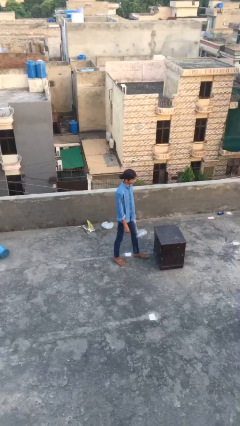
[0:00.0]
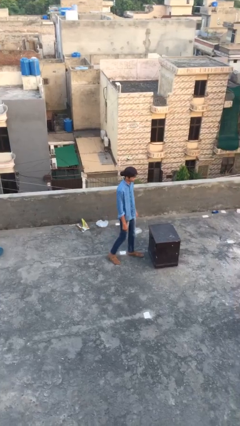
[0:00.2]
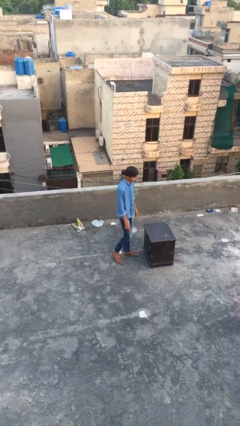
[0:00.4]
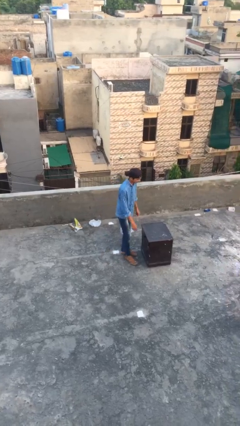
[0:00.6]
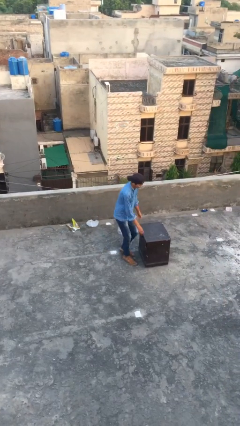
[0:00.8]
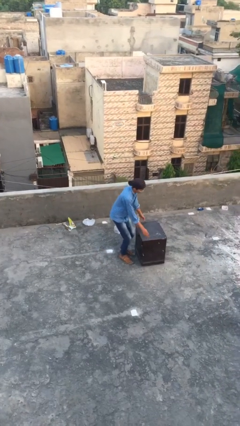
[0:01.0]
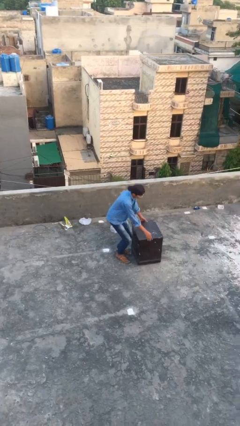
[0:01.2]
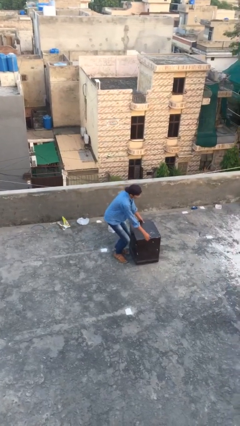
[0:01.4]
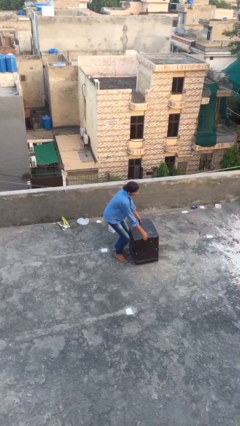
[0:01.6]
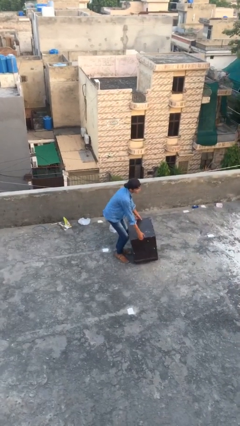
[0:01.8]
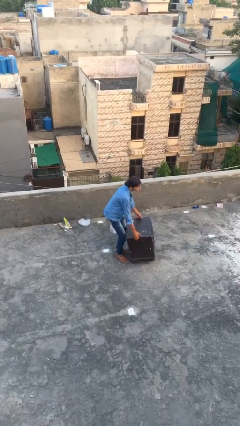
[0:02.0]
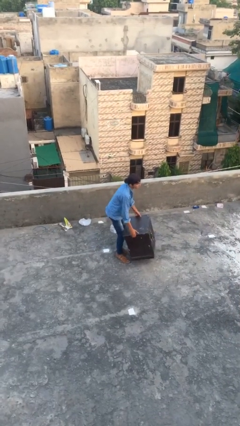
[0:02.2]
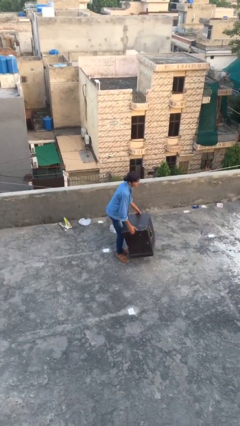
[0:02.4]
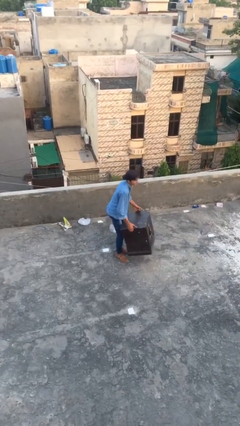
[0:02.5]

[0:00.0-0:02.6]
person picks up object from floor

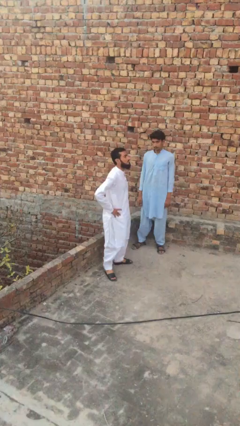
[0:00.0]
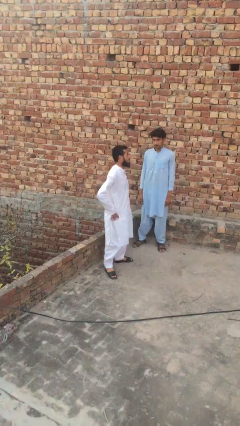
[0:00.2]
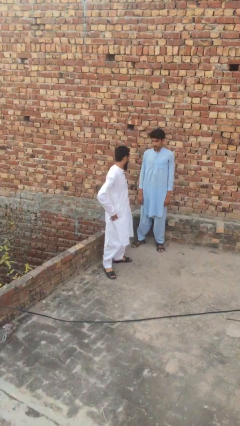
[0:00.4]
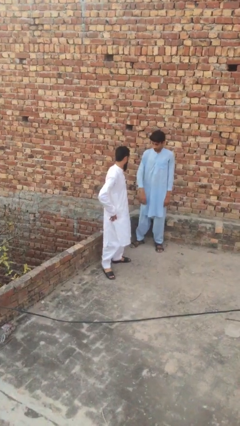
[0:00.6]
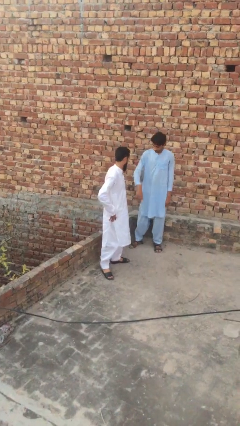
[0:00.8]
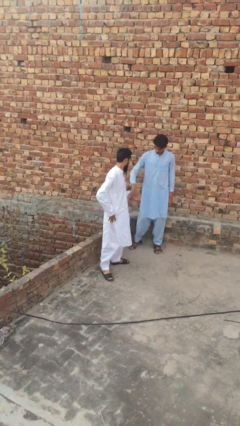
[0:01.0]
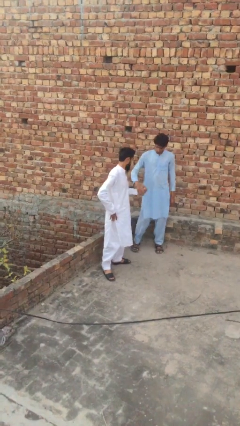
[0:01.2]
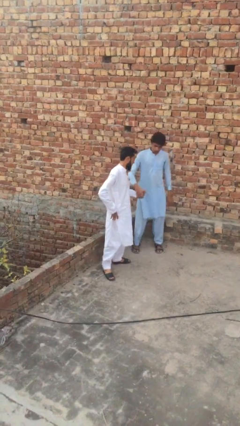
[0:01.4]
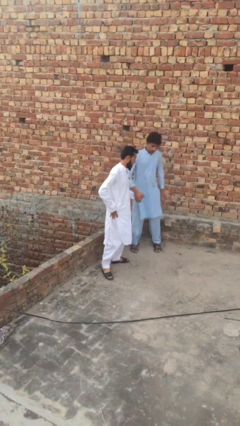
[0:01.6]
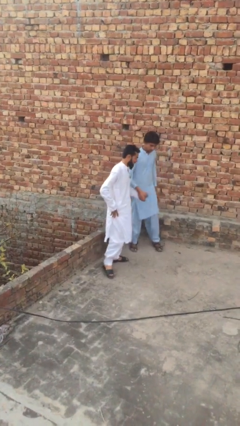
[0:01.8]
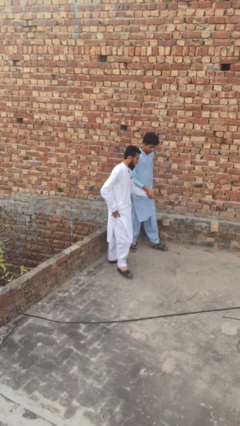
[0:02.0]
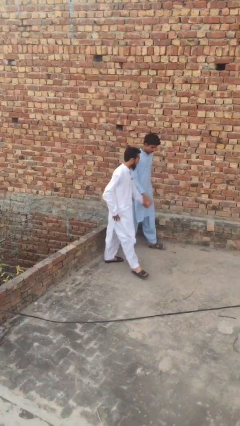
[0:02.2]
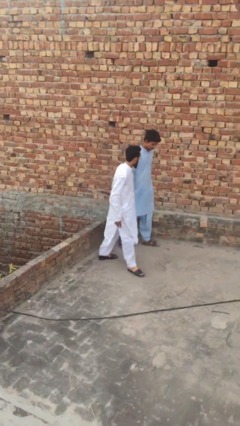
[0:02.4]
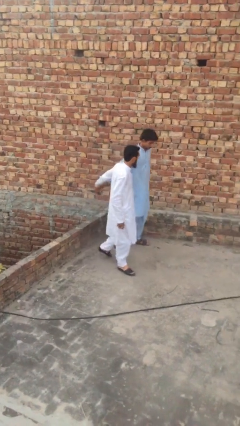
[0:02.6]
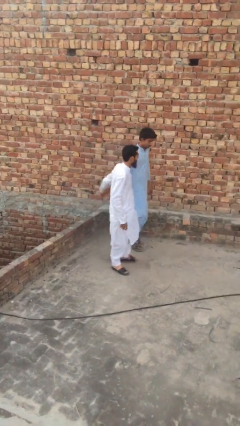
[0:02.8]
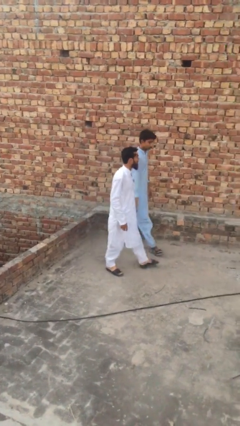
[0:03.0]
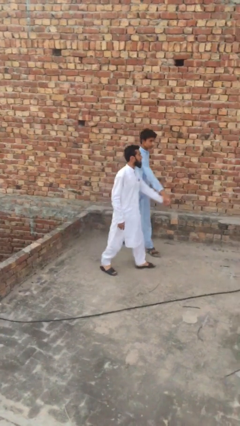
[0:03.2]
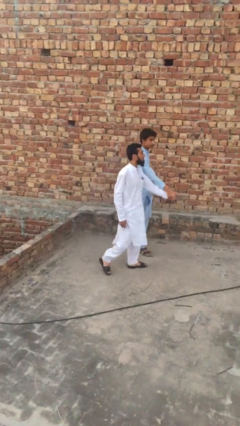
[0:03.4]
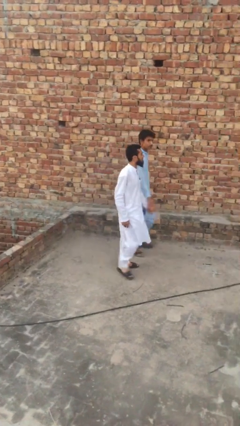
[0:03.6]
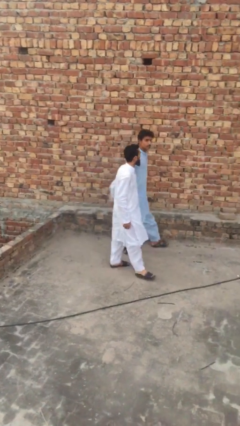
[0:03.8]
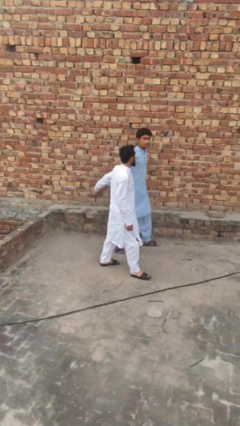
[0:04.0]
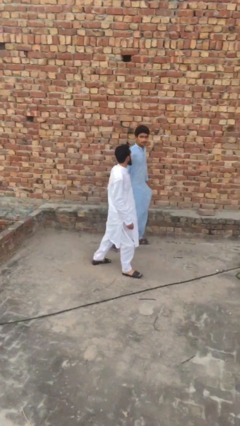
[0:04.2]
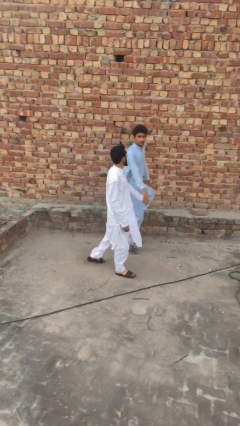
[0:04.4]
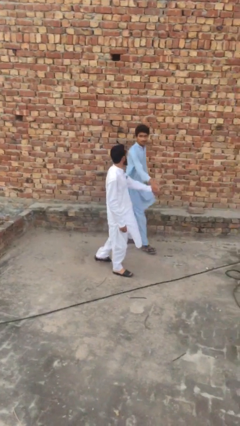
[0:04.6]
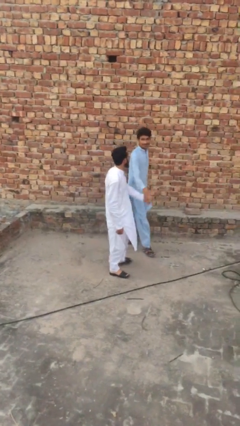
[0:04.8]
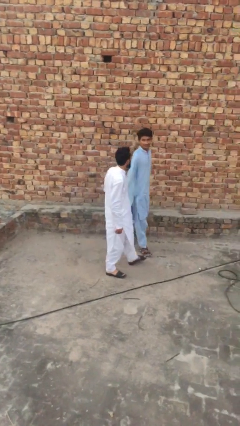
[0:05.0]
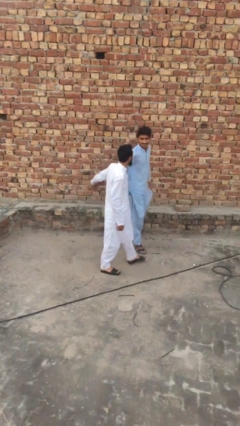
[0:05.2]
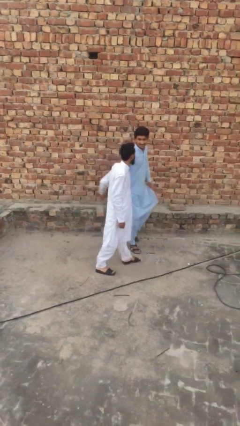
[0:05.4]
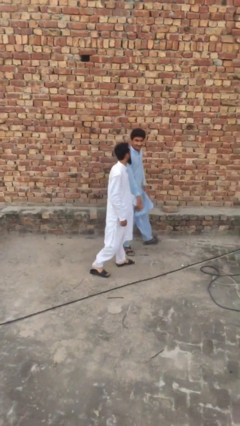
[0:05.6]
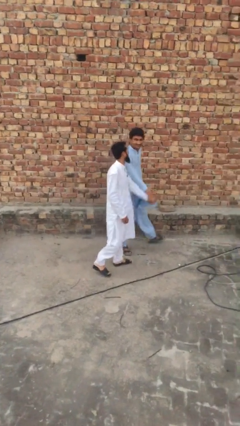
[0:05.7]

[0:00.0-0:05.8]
person holds hand

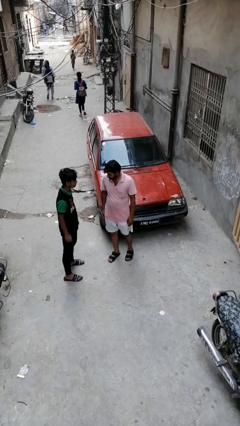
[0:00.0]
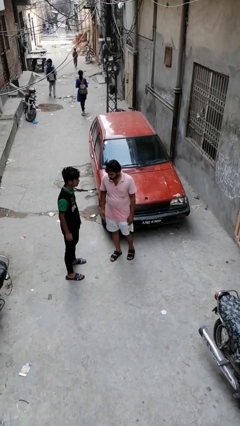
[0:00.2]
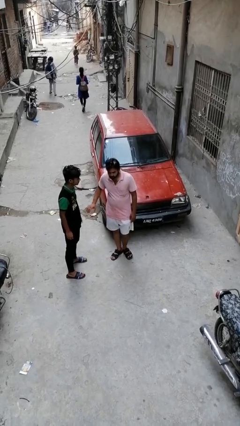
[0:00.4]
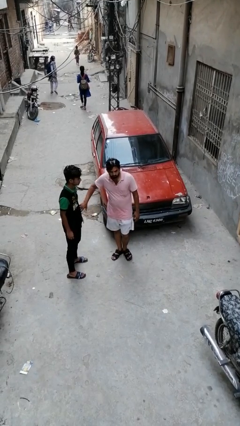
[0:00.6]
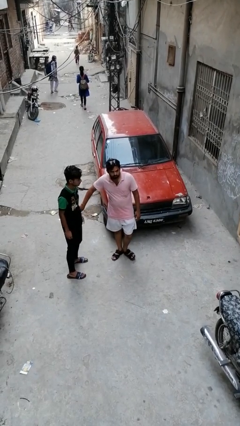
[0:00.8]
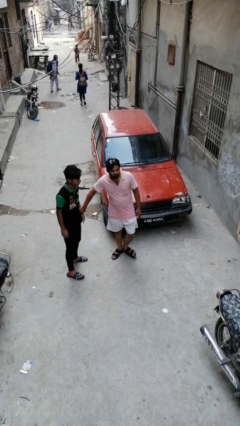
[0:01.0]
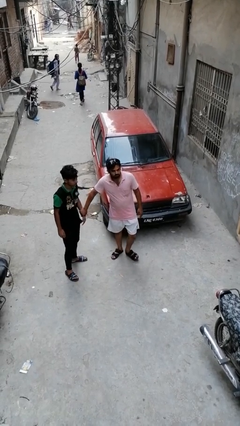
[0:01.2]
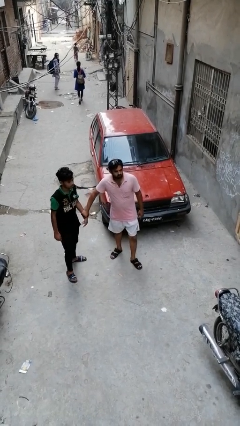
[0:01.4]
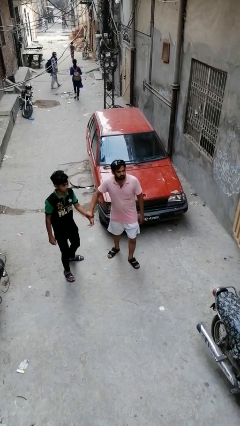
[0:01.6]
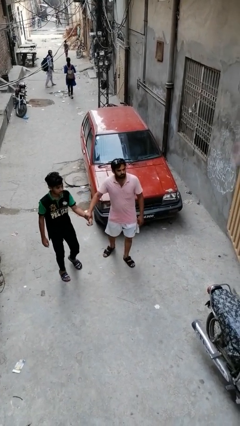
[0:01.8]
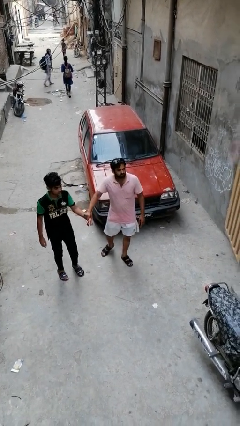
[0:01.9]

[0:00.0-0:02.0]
person grabs person by forearm

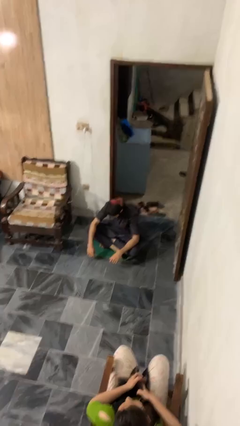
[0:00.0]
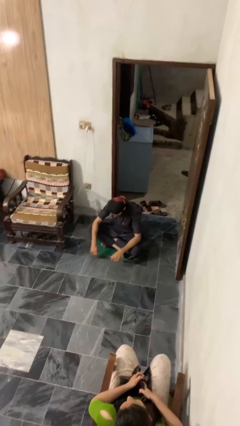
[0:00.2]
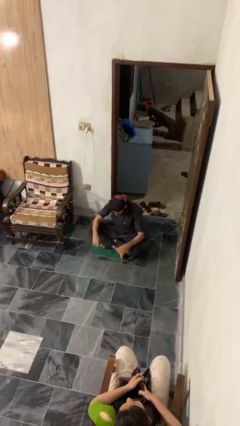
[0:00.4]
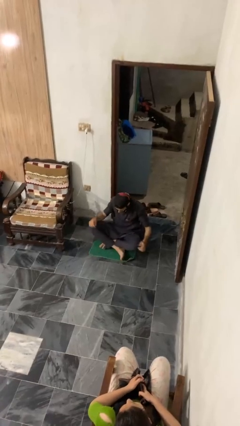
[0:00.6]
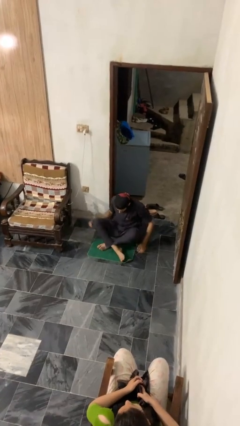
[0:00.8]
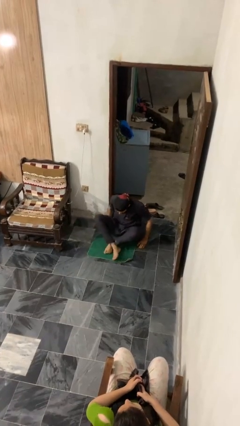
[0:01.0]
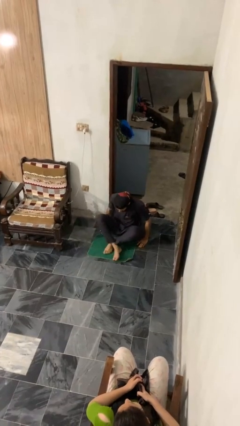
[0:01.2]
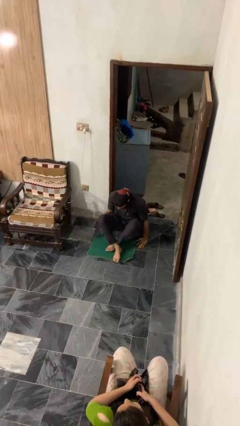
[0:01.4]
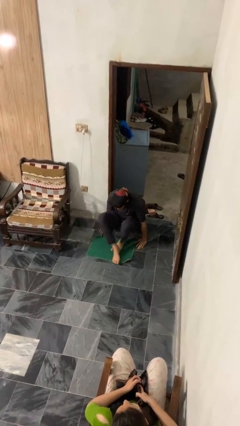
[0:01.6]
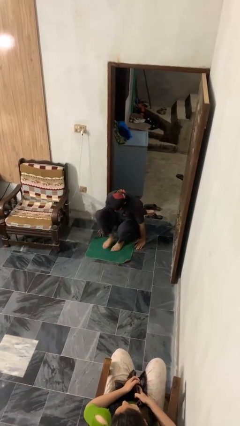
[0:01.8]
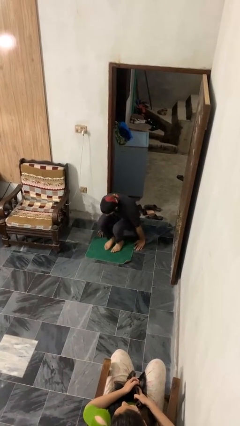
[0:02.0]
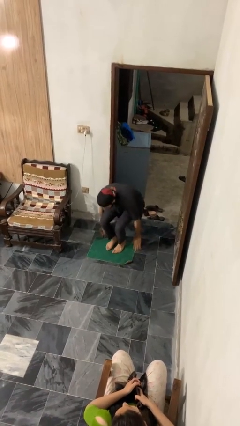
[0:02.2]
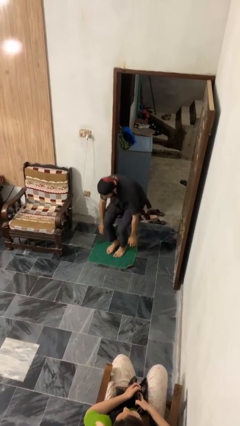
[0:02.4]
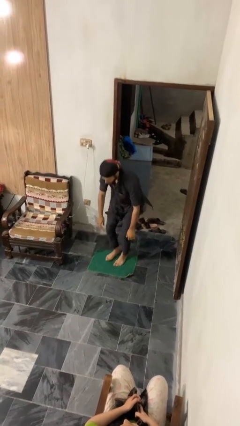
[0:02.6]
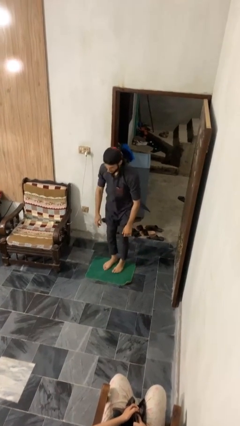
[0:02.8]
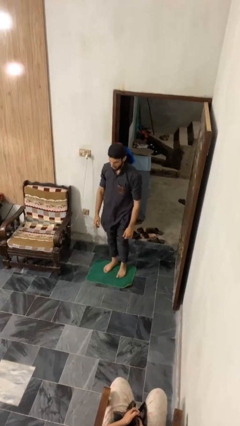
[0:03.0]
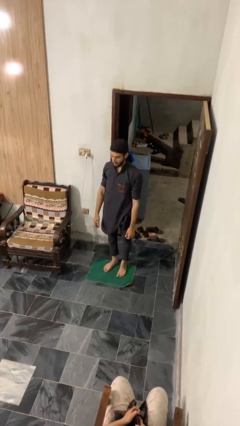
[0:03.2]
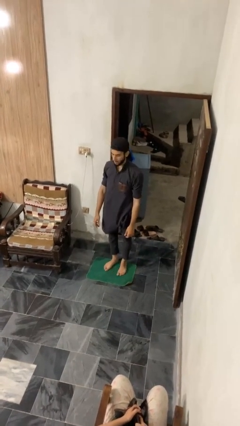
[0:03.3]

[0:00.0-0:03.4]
person stands up from floor

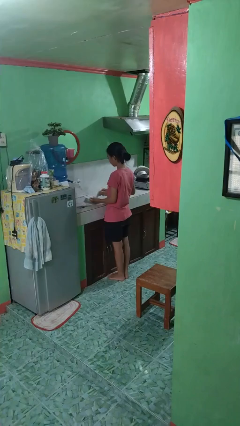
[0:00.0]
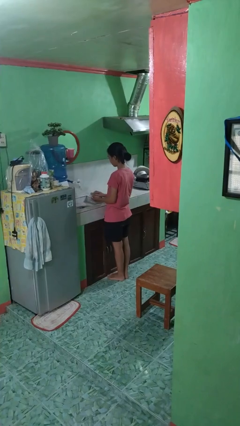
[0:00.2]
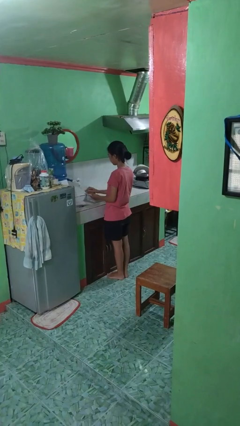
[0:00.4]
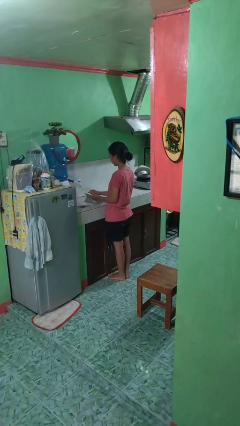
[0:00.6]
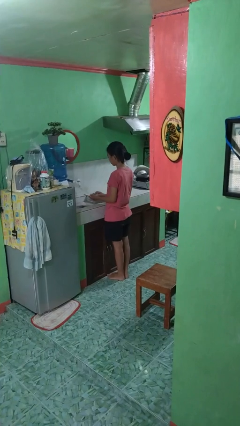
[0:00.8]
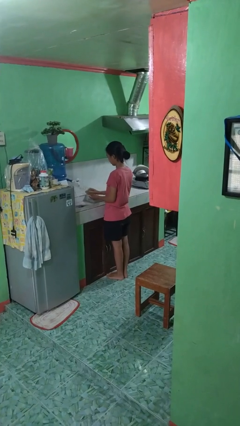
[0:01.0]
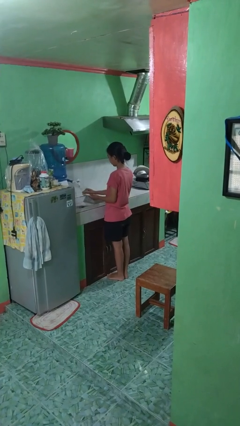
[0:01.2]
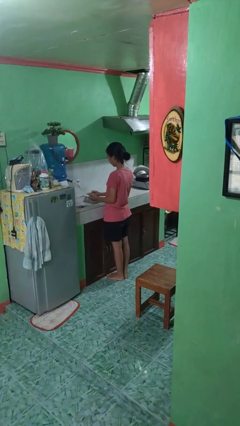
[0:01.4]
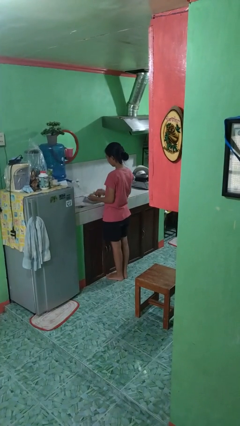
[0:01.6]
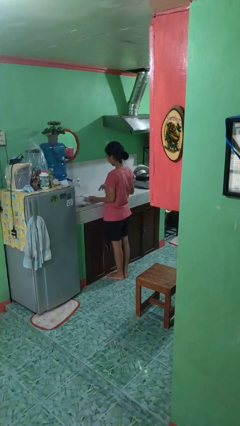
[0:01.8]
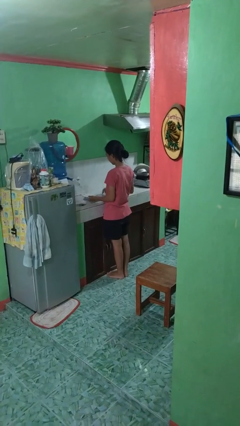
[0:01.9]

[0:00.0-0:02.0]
person dries dish

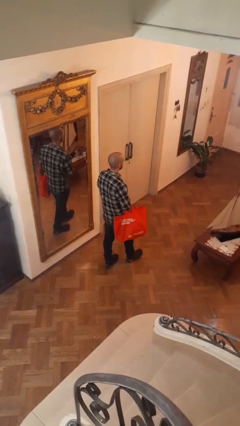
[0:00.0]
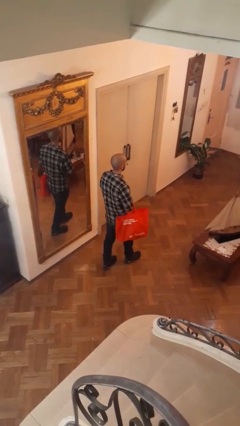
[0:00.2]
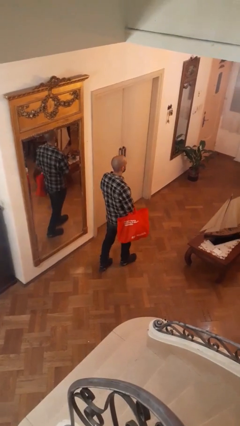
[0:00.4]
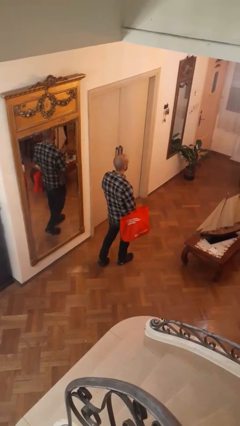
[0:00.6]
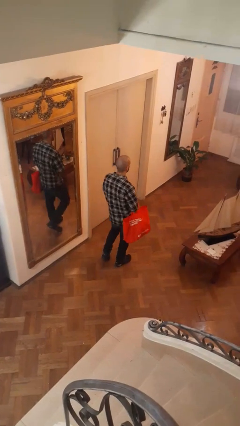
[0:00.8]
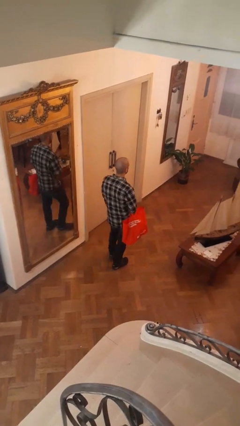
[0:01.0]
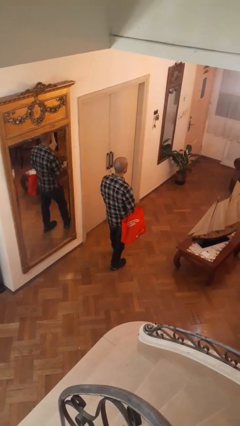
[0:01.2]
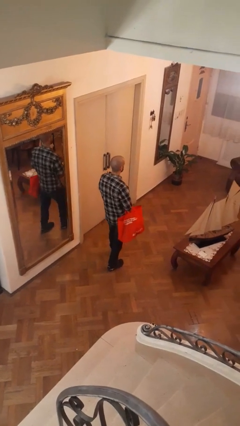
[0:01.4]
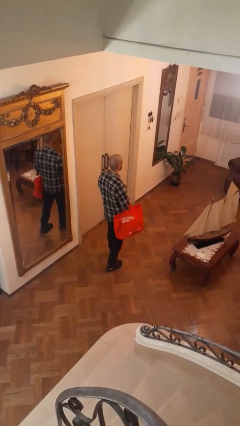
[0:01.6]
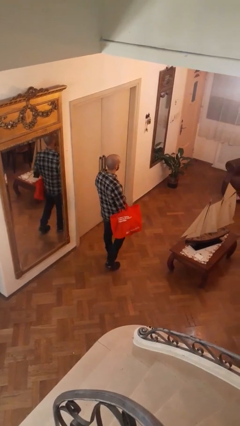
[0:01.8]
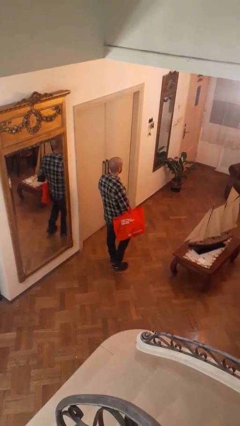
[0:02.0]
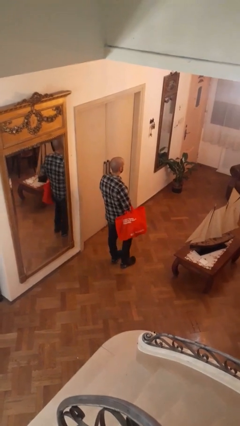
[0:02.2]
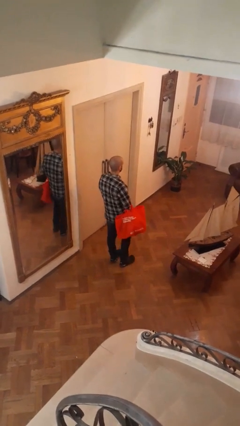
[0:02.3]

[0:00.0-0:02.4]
person carries groceries
